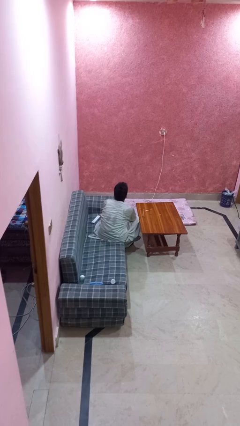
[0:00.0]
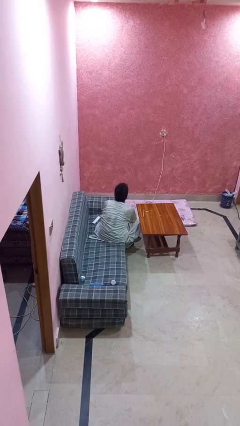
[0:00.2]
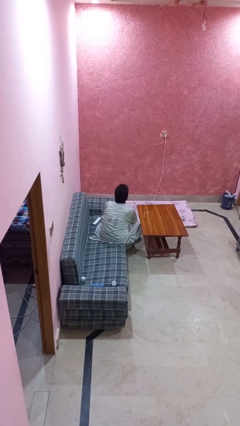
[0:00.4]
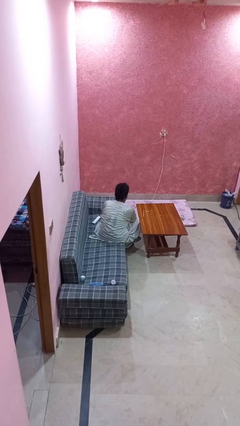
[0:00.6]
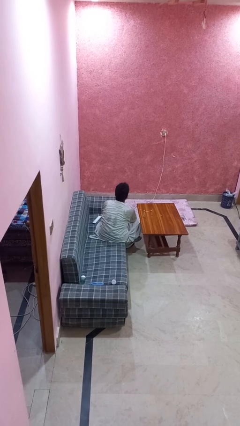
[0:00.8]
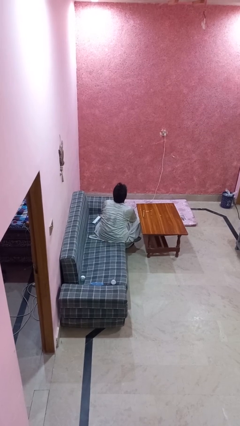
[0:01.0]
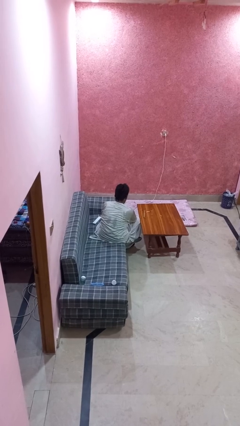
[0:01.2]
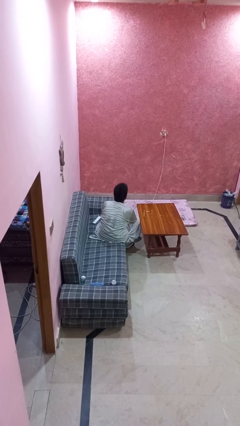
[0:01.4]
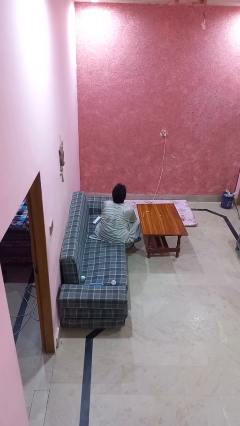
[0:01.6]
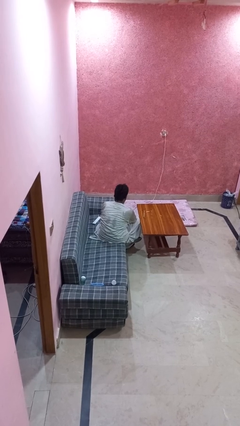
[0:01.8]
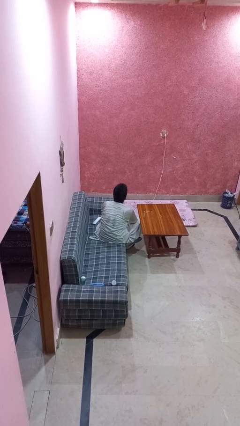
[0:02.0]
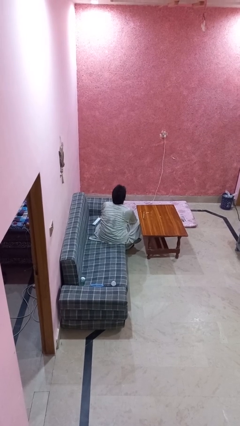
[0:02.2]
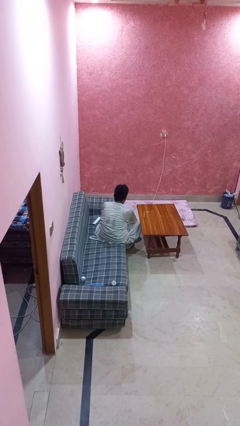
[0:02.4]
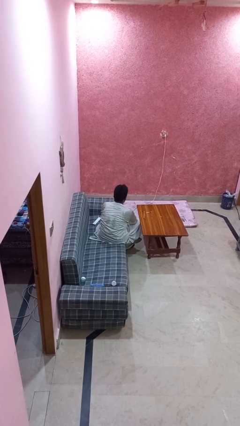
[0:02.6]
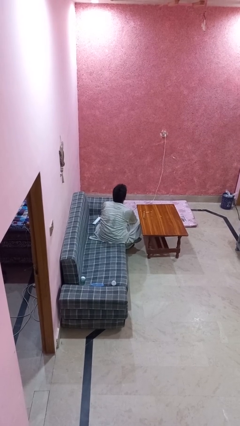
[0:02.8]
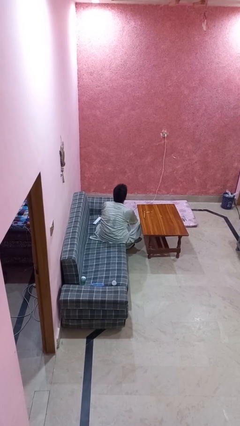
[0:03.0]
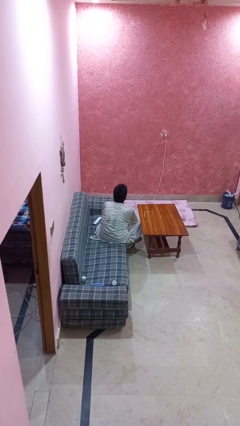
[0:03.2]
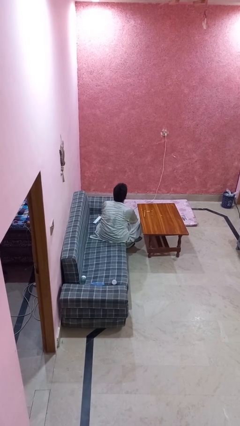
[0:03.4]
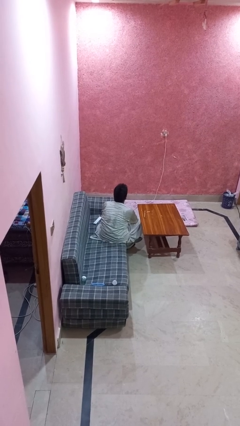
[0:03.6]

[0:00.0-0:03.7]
person nods head

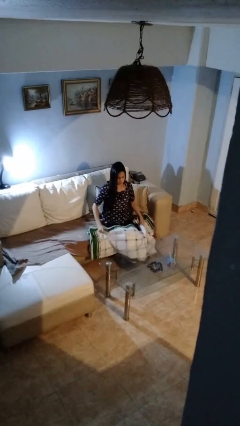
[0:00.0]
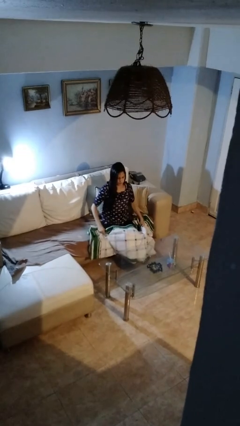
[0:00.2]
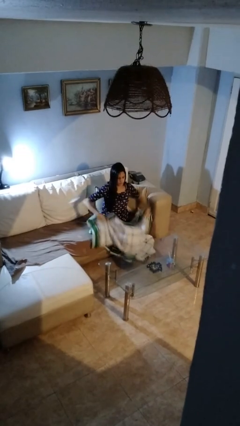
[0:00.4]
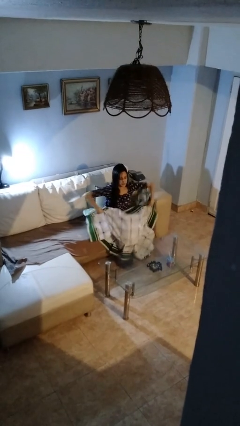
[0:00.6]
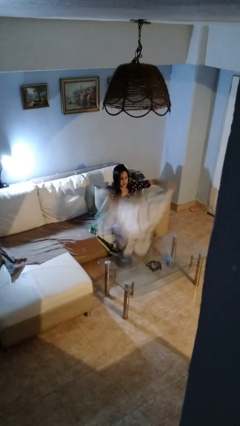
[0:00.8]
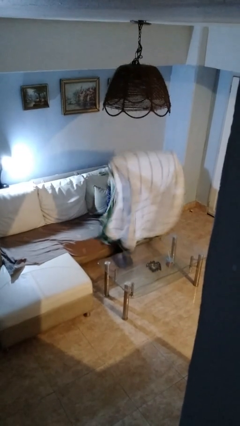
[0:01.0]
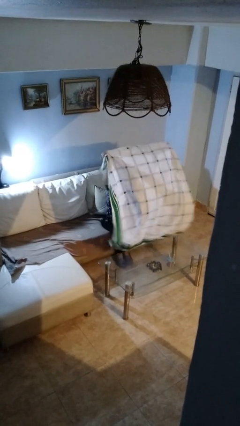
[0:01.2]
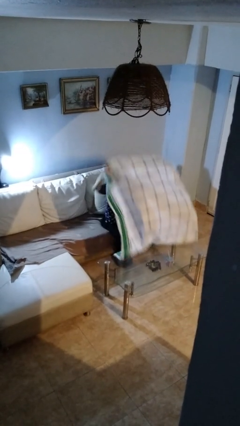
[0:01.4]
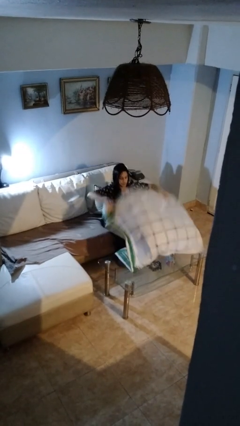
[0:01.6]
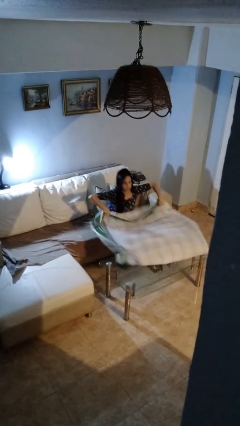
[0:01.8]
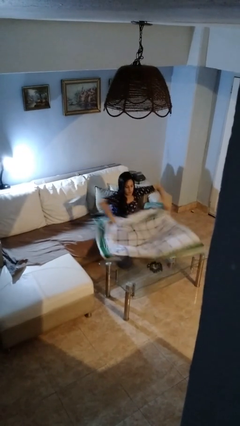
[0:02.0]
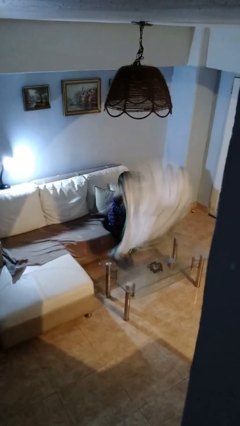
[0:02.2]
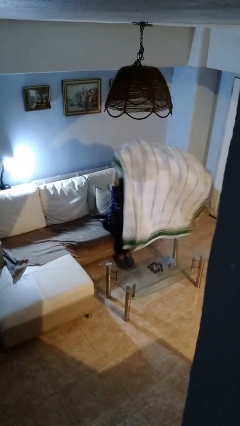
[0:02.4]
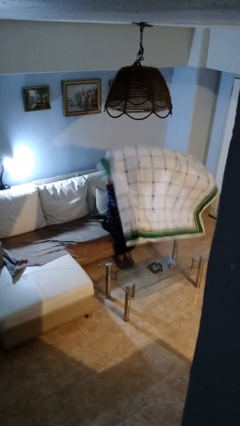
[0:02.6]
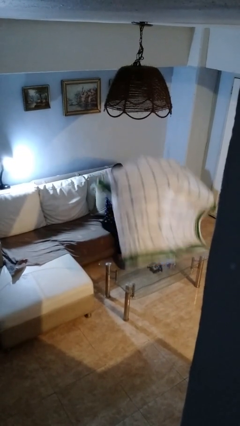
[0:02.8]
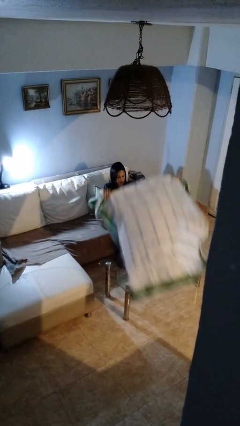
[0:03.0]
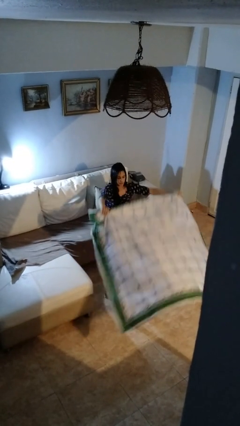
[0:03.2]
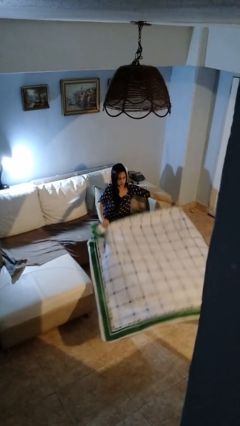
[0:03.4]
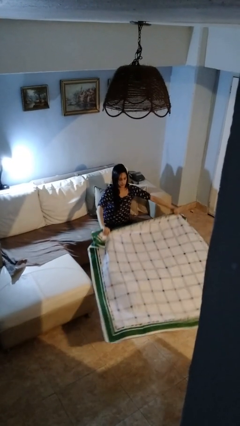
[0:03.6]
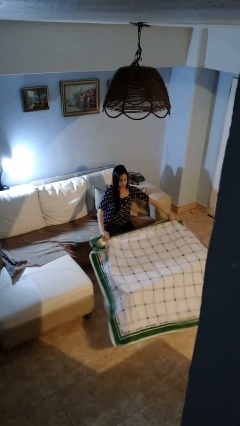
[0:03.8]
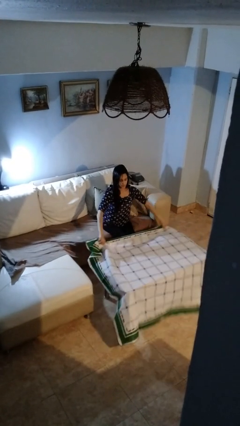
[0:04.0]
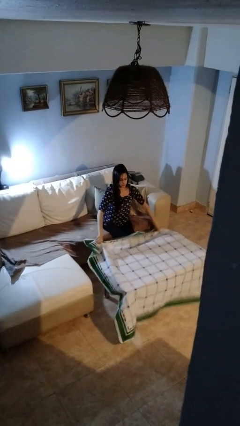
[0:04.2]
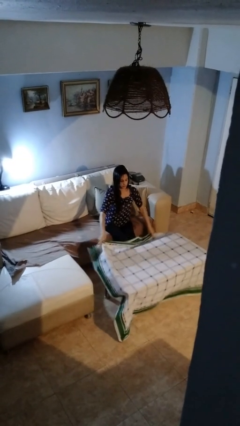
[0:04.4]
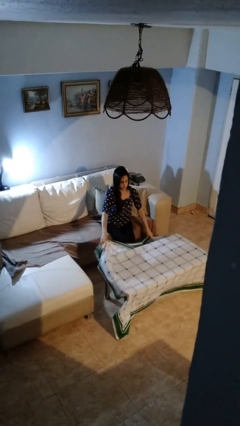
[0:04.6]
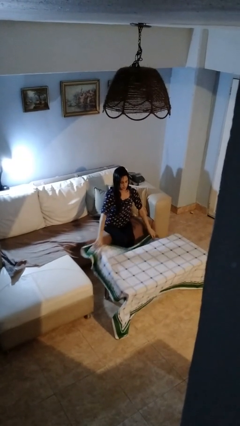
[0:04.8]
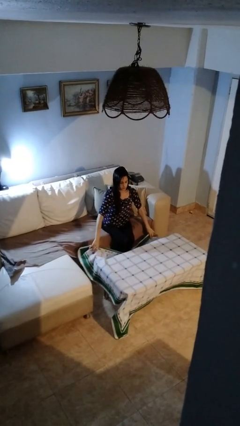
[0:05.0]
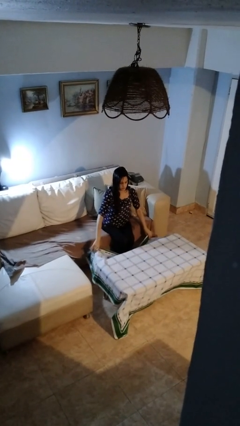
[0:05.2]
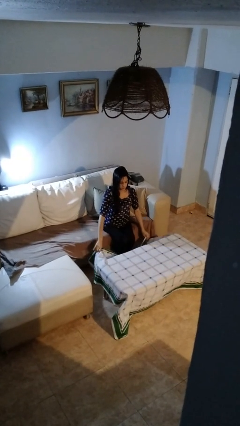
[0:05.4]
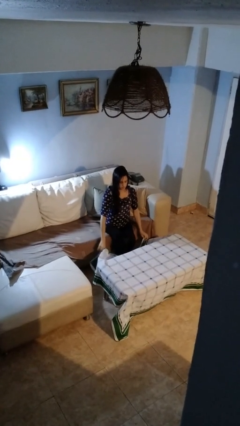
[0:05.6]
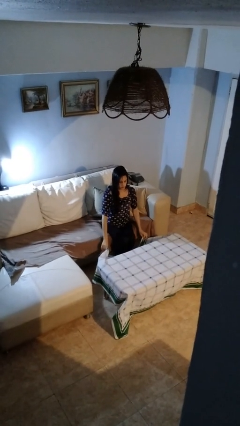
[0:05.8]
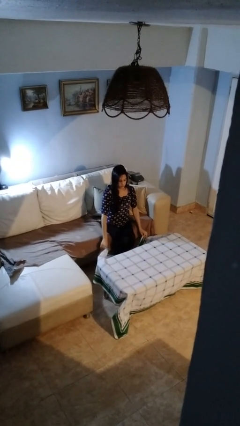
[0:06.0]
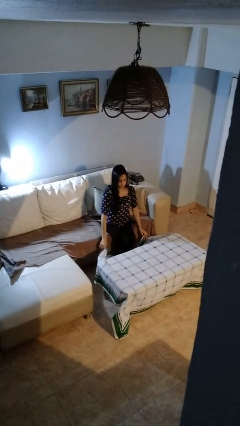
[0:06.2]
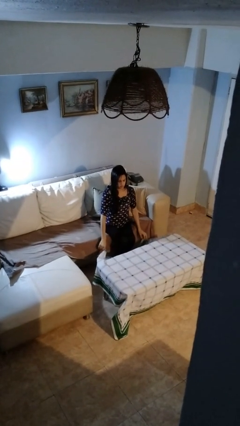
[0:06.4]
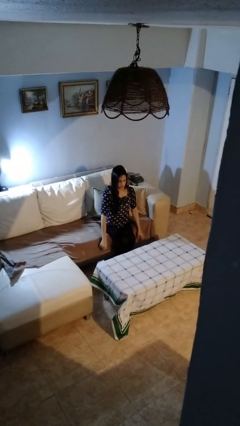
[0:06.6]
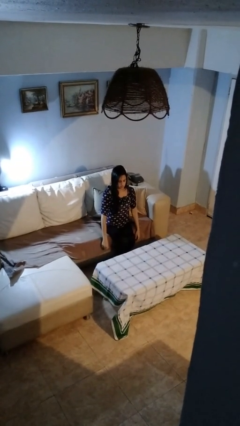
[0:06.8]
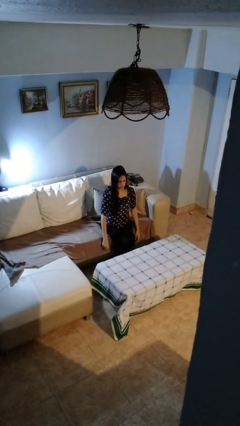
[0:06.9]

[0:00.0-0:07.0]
person spreads tablecloth

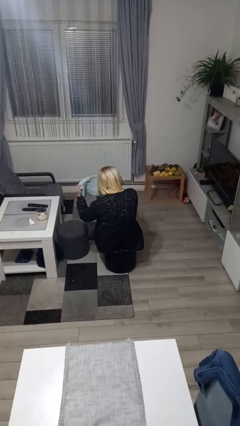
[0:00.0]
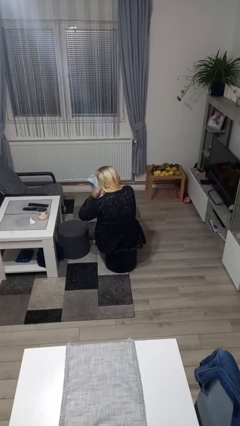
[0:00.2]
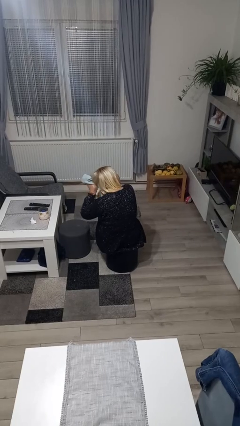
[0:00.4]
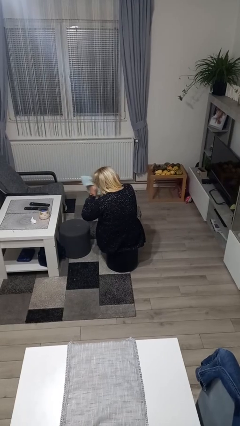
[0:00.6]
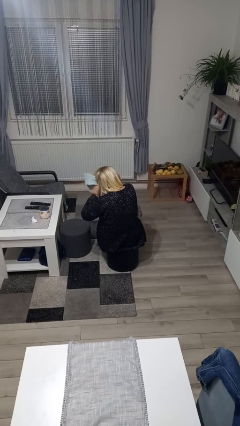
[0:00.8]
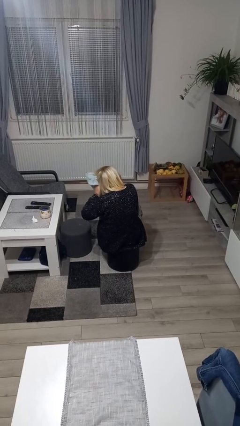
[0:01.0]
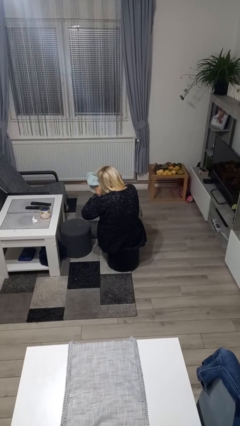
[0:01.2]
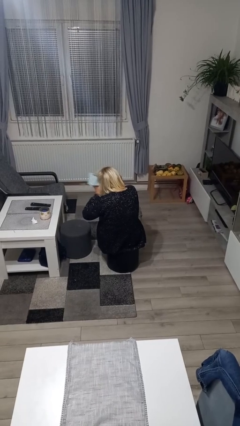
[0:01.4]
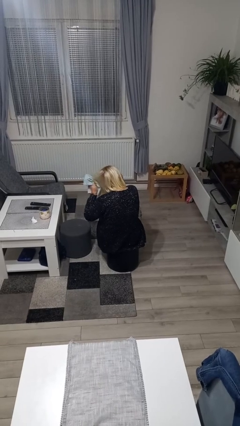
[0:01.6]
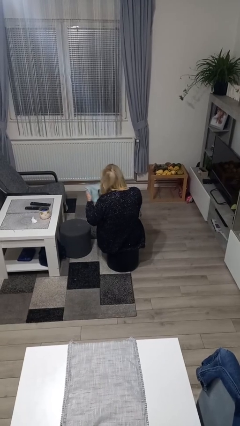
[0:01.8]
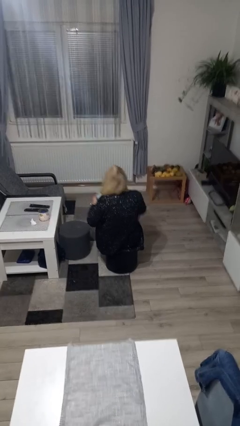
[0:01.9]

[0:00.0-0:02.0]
person dries hair with towel

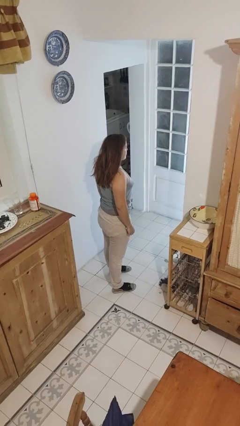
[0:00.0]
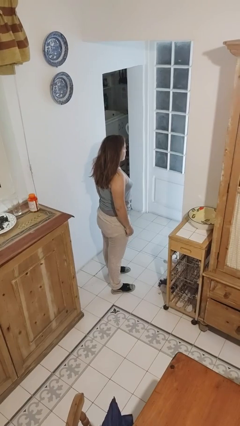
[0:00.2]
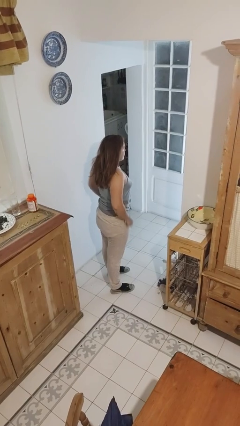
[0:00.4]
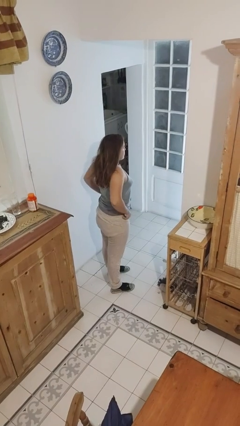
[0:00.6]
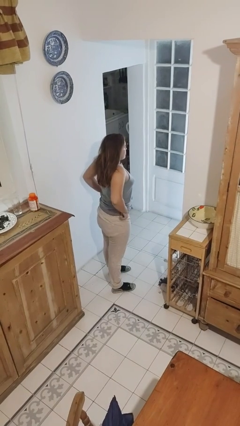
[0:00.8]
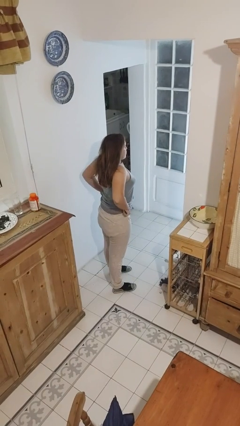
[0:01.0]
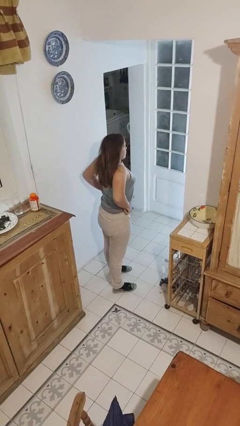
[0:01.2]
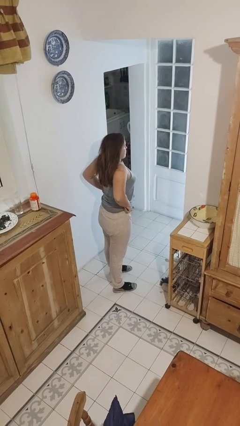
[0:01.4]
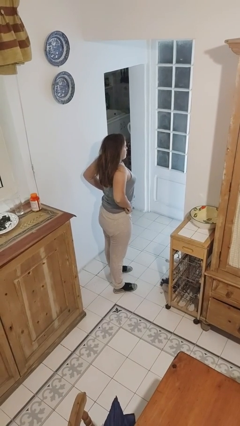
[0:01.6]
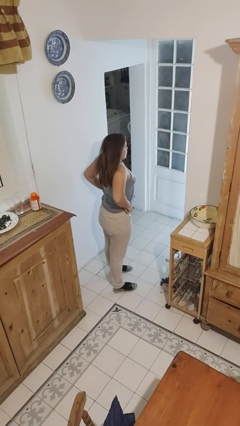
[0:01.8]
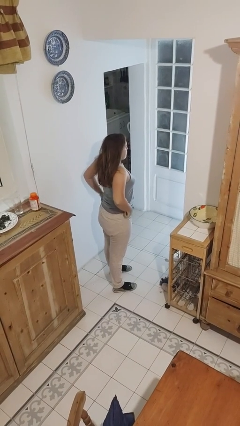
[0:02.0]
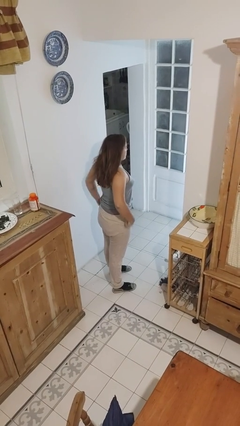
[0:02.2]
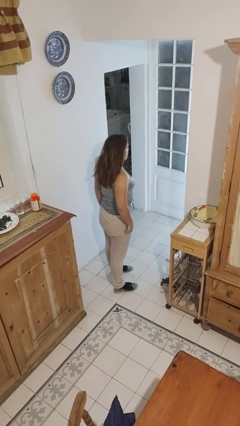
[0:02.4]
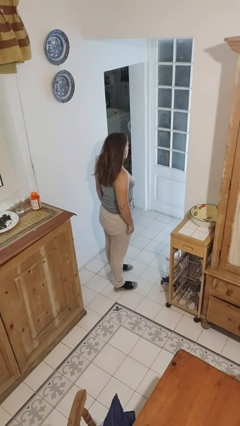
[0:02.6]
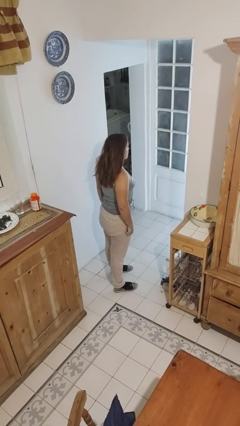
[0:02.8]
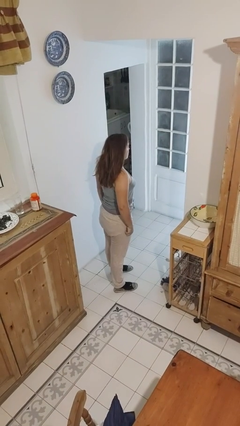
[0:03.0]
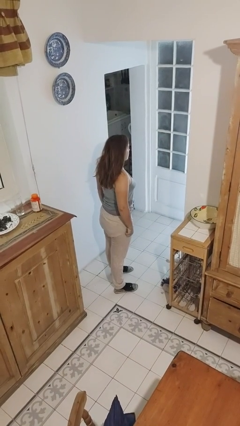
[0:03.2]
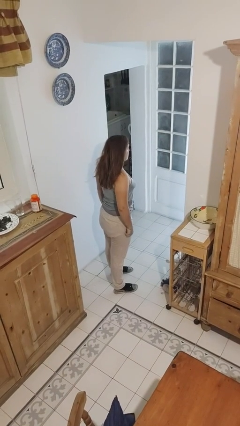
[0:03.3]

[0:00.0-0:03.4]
person hikes up pants

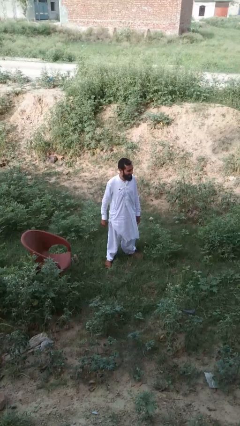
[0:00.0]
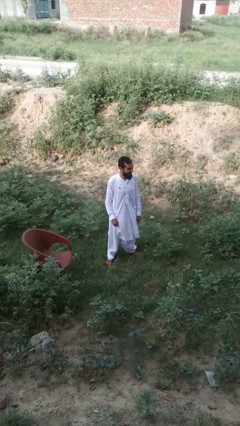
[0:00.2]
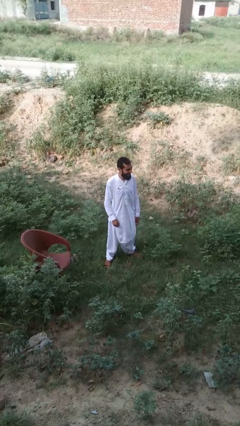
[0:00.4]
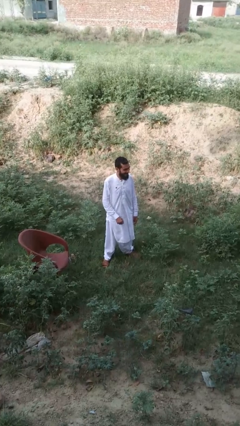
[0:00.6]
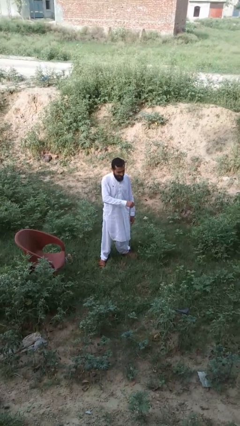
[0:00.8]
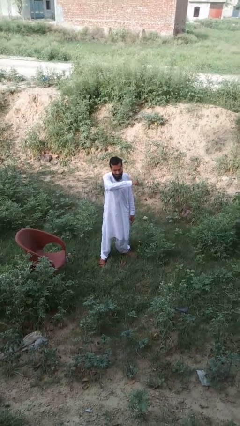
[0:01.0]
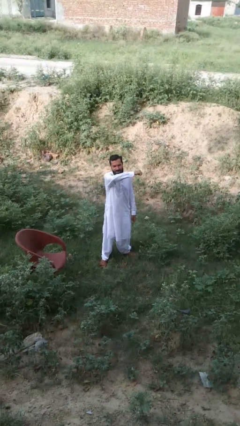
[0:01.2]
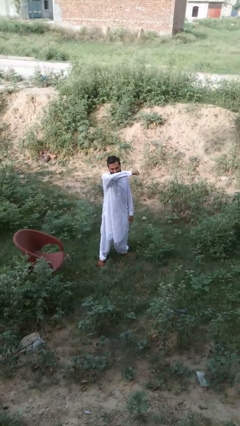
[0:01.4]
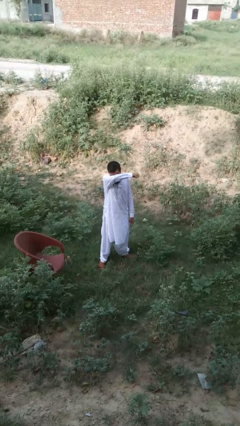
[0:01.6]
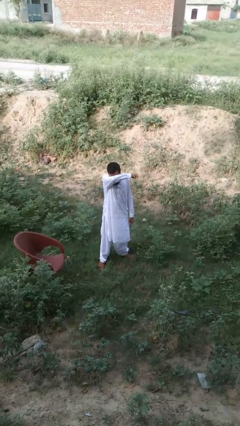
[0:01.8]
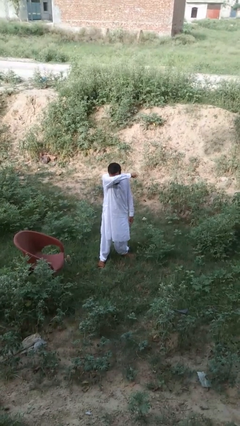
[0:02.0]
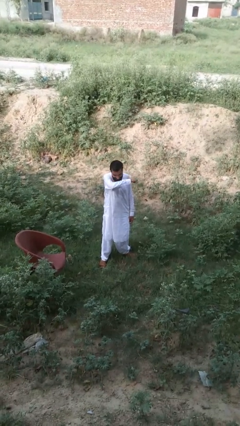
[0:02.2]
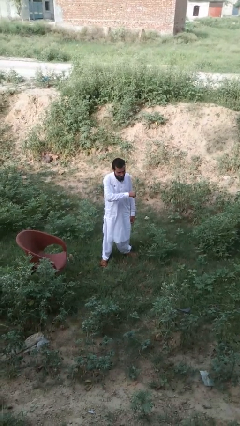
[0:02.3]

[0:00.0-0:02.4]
person sneezes into arm
